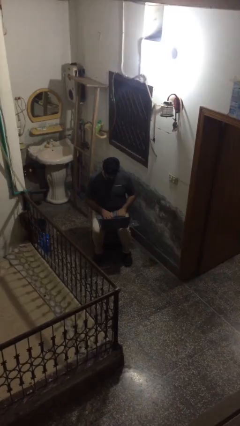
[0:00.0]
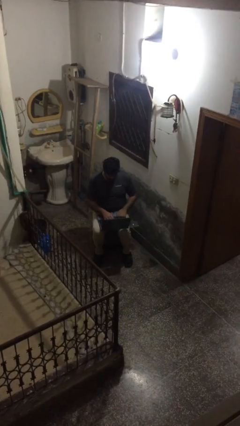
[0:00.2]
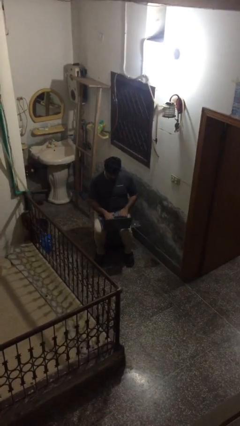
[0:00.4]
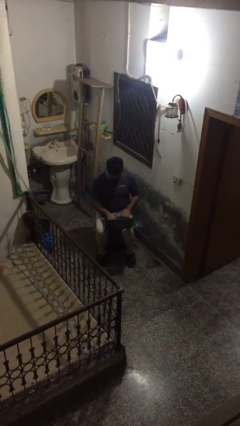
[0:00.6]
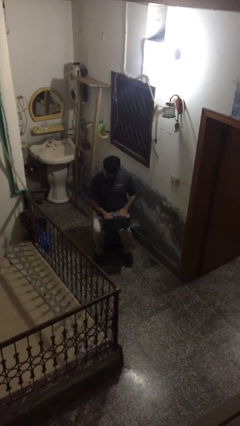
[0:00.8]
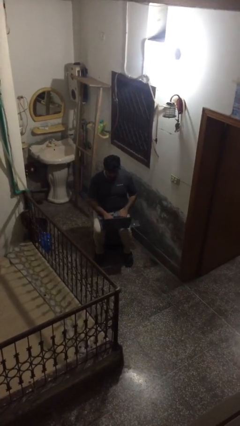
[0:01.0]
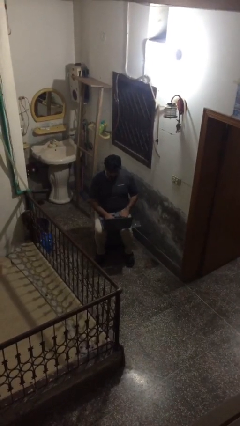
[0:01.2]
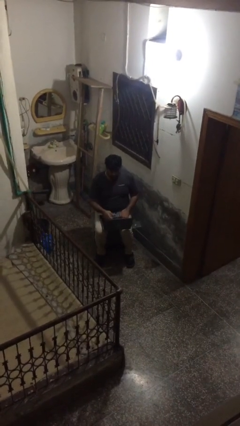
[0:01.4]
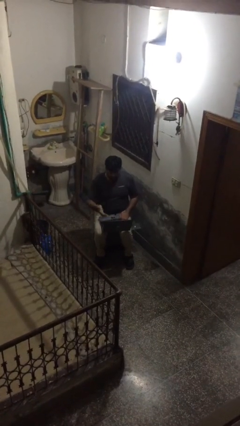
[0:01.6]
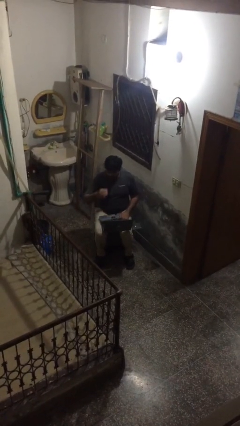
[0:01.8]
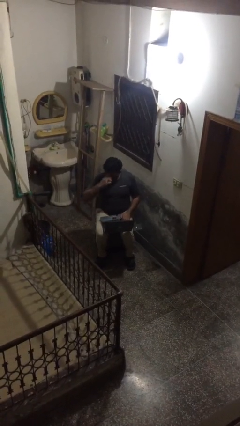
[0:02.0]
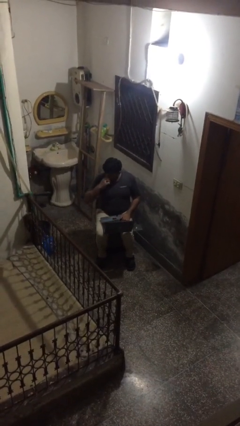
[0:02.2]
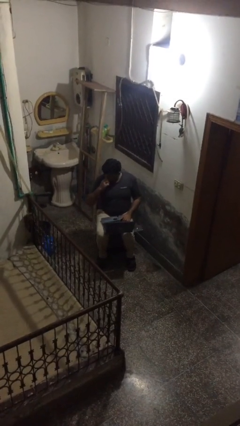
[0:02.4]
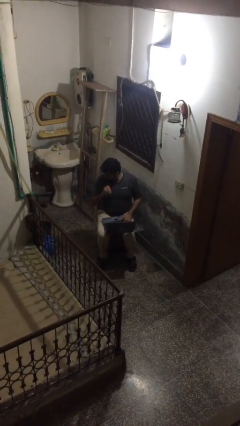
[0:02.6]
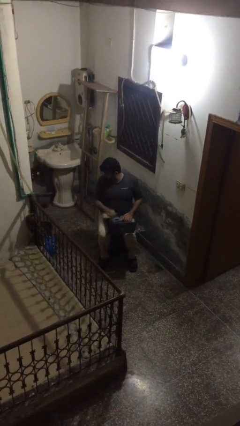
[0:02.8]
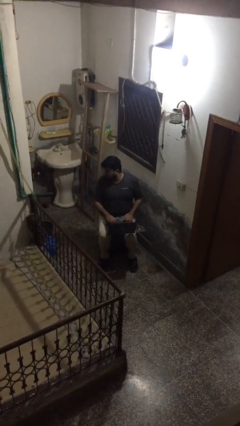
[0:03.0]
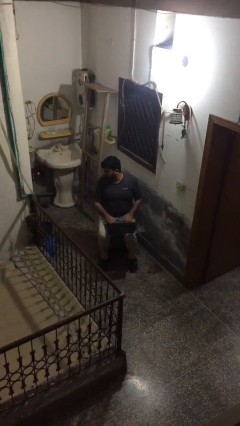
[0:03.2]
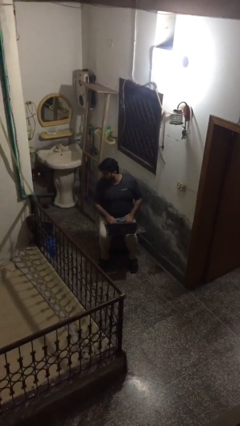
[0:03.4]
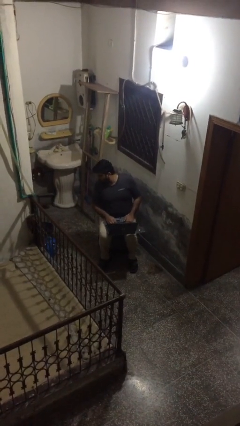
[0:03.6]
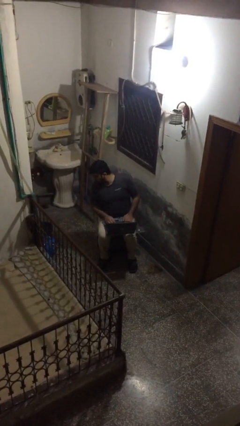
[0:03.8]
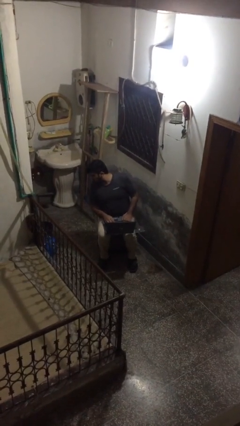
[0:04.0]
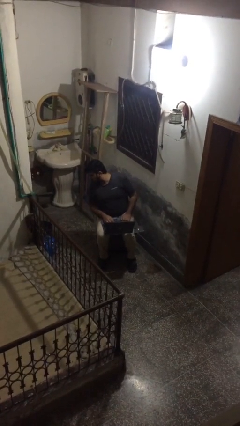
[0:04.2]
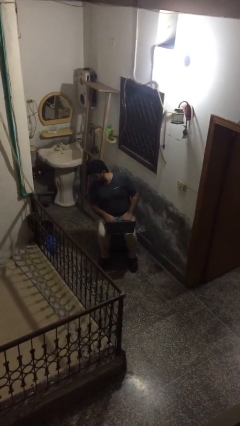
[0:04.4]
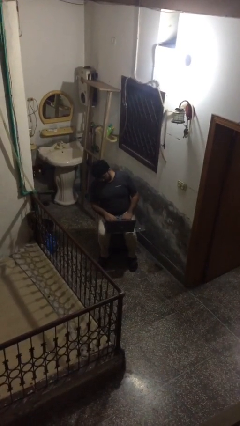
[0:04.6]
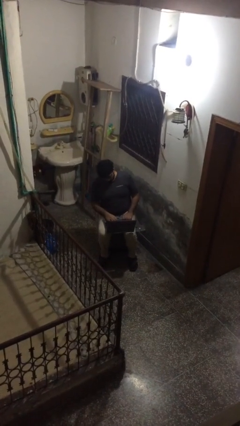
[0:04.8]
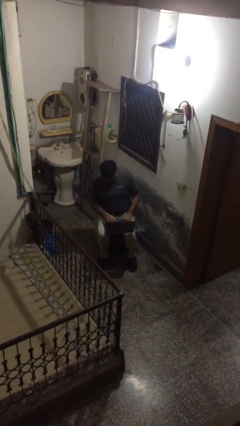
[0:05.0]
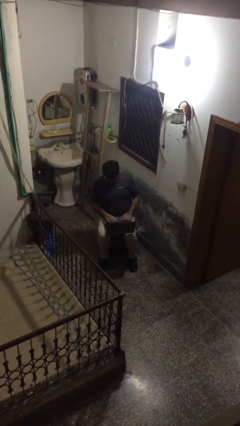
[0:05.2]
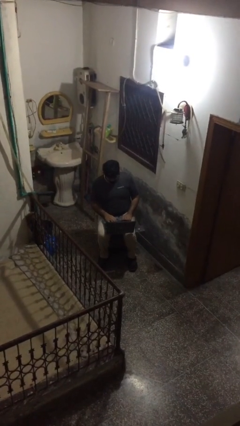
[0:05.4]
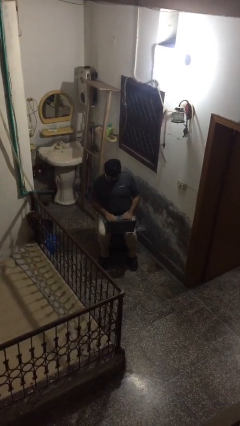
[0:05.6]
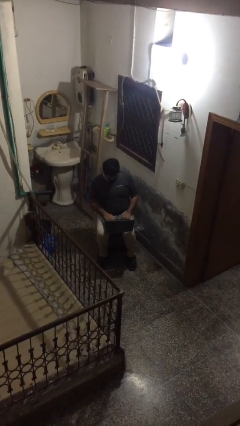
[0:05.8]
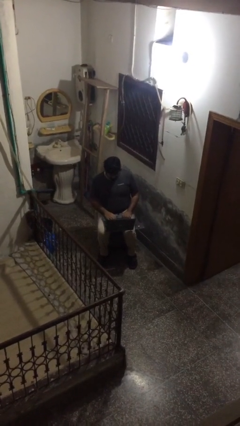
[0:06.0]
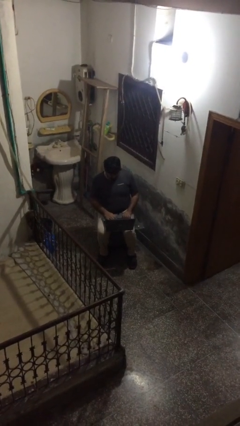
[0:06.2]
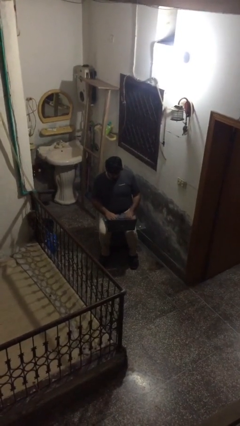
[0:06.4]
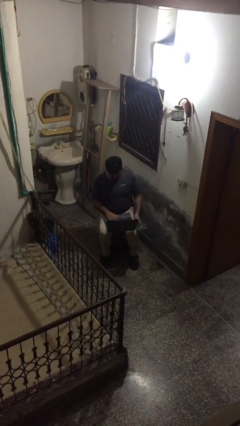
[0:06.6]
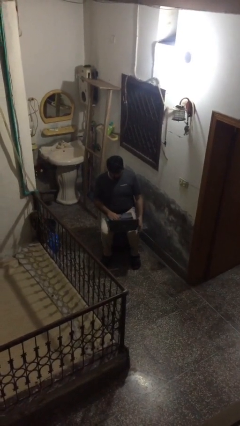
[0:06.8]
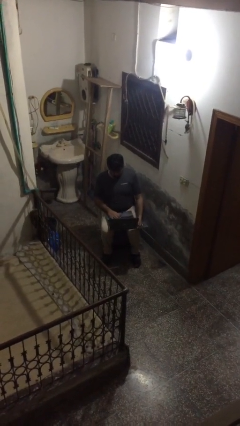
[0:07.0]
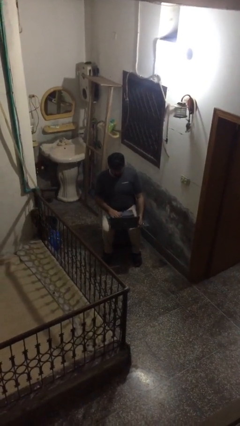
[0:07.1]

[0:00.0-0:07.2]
person interacts with laptop

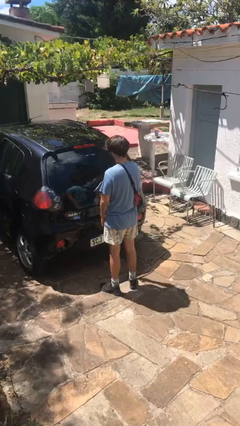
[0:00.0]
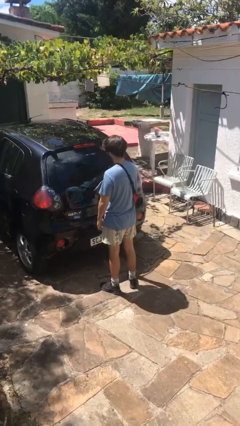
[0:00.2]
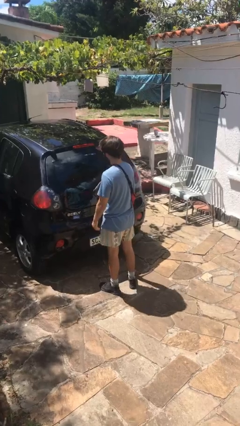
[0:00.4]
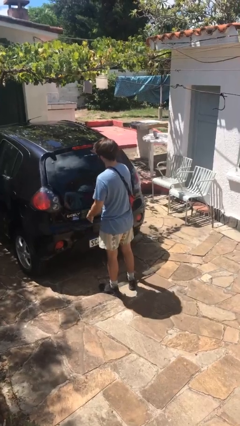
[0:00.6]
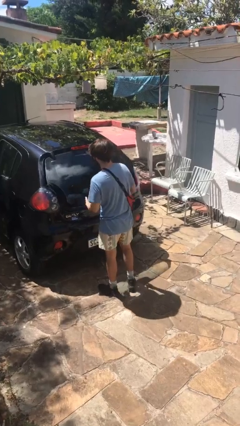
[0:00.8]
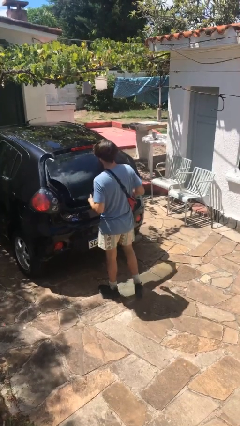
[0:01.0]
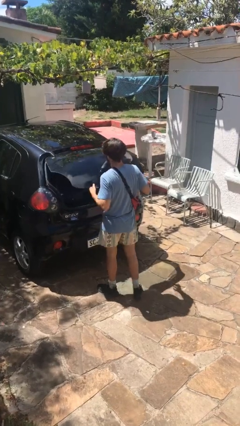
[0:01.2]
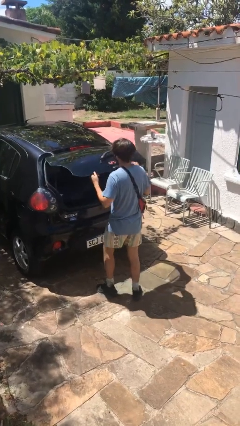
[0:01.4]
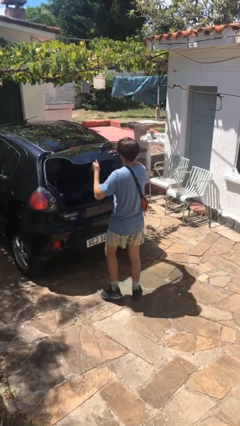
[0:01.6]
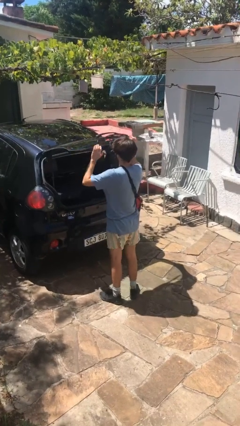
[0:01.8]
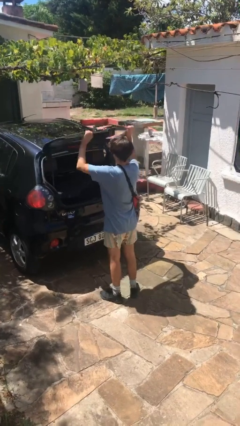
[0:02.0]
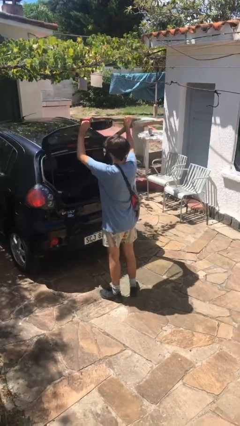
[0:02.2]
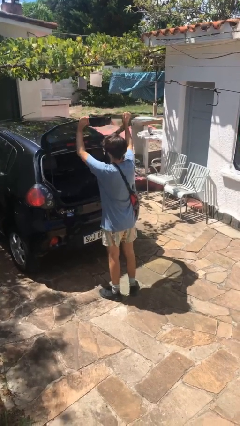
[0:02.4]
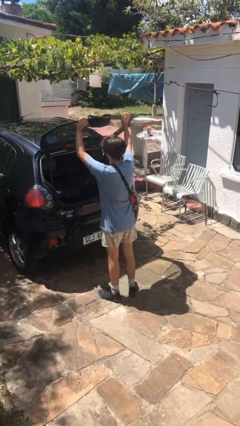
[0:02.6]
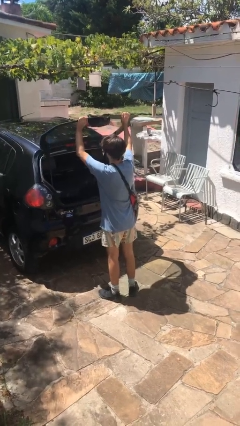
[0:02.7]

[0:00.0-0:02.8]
person opens car trunk

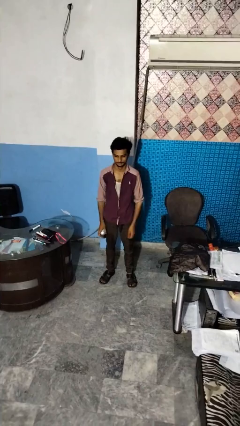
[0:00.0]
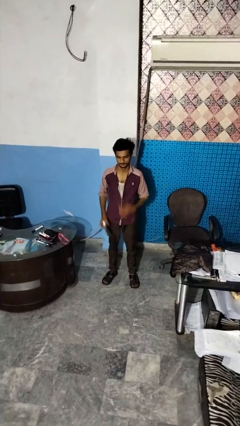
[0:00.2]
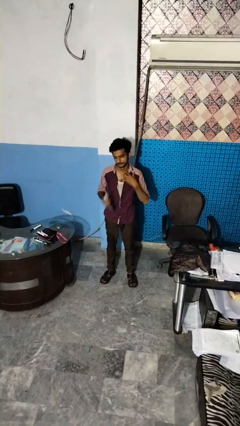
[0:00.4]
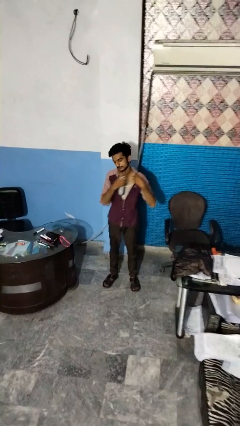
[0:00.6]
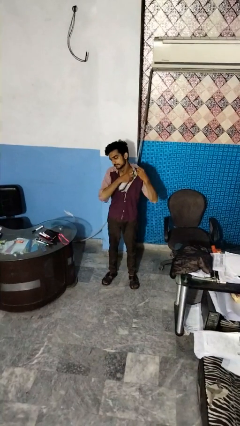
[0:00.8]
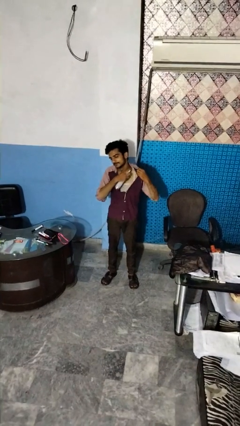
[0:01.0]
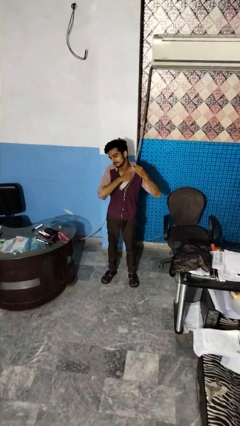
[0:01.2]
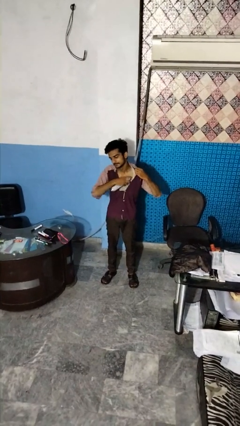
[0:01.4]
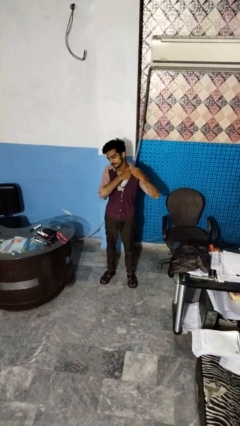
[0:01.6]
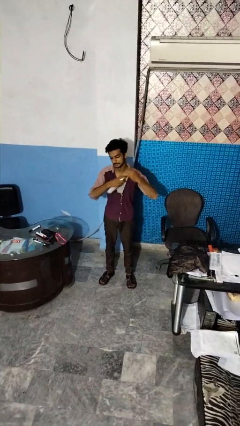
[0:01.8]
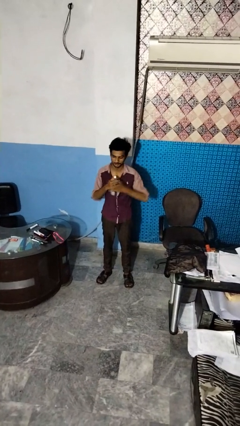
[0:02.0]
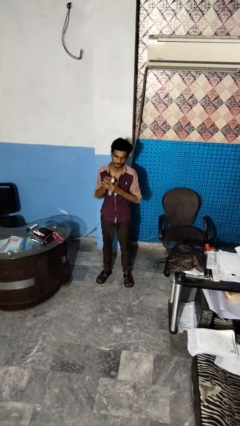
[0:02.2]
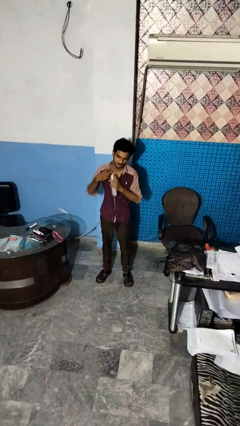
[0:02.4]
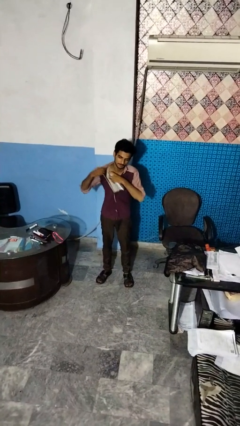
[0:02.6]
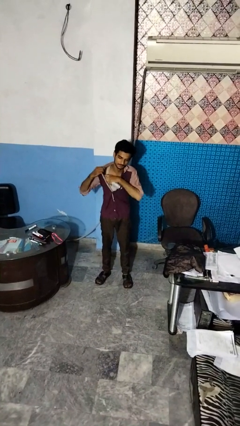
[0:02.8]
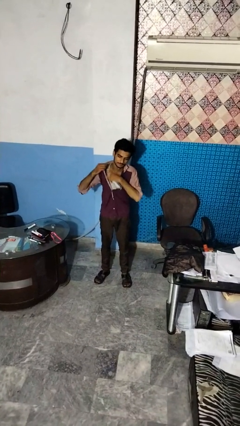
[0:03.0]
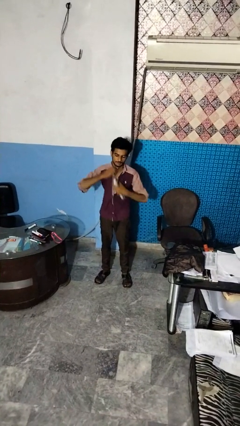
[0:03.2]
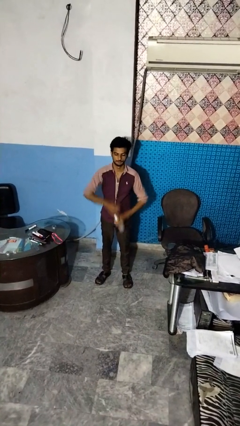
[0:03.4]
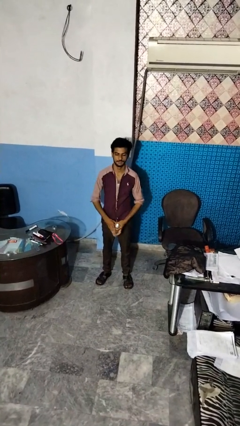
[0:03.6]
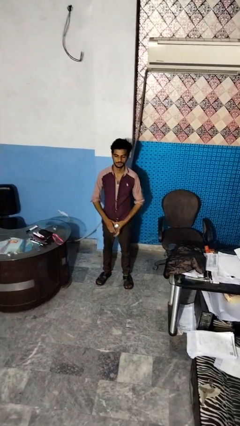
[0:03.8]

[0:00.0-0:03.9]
person applies deodorant

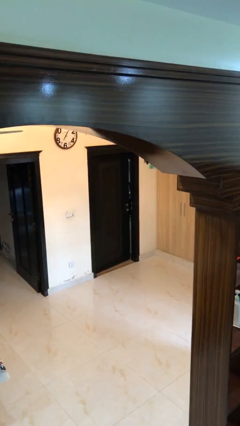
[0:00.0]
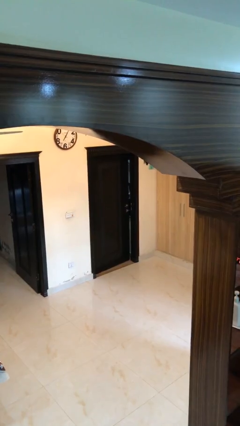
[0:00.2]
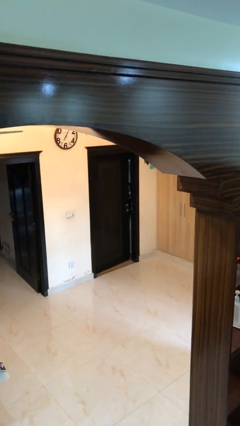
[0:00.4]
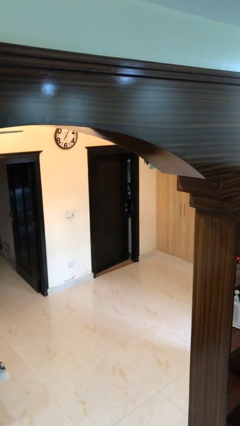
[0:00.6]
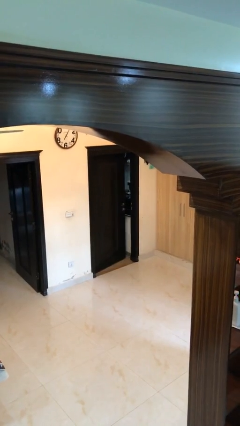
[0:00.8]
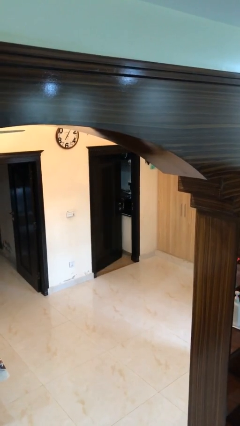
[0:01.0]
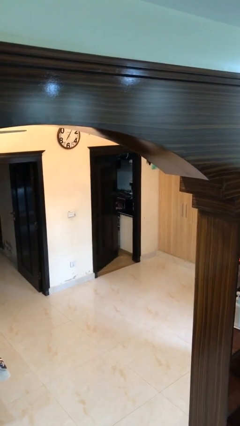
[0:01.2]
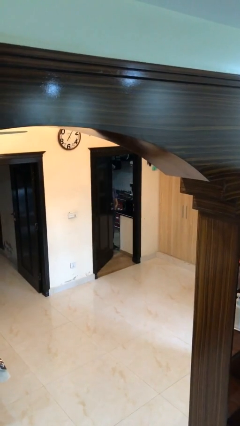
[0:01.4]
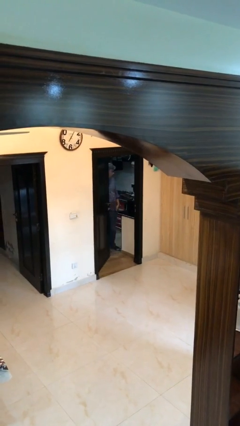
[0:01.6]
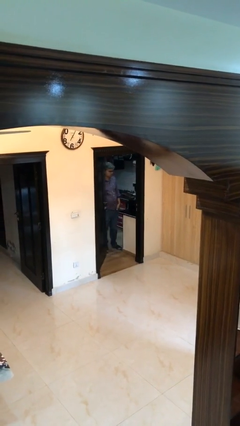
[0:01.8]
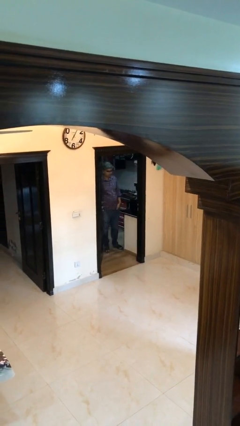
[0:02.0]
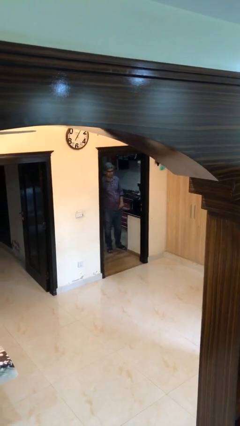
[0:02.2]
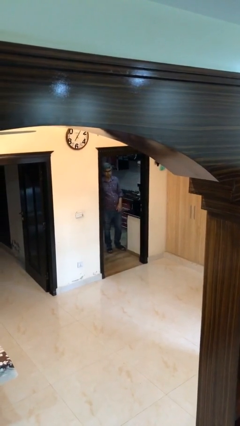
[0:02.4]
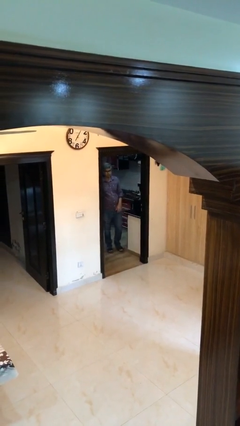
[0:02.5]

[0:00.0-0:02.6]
person opens facility door

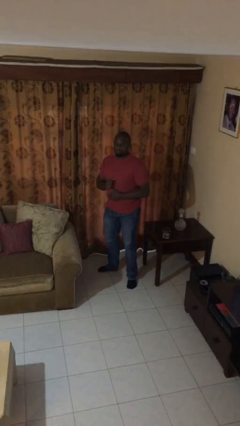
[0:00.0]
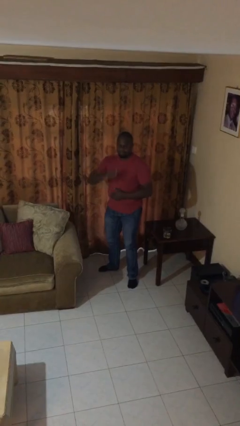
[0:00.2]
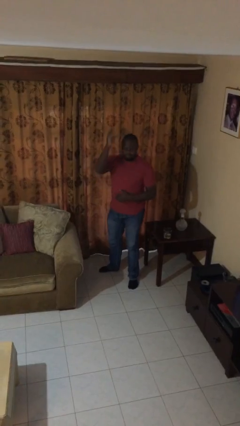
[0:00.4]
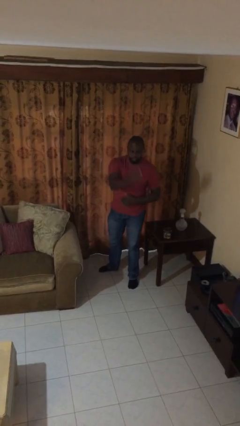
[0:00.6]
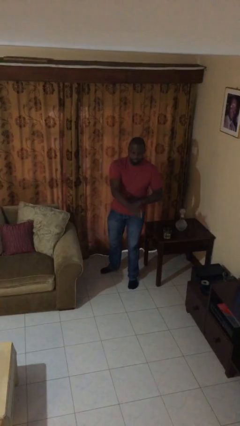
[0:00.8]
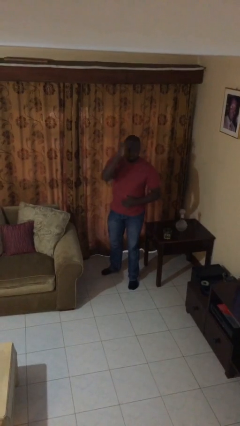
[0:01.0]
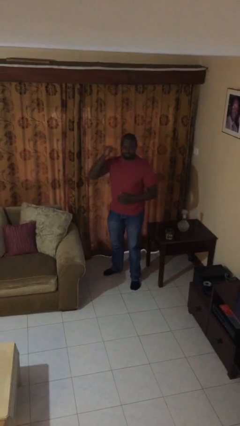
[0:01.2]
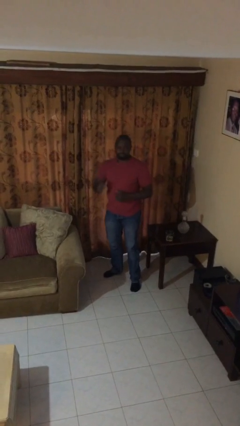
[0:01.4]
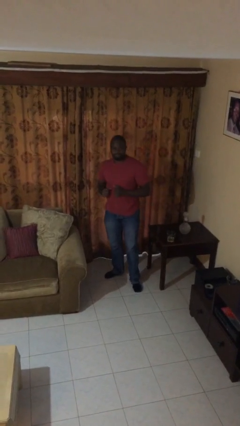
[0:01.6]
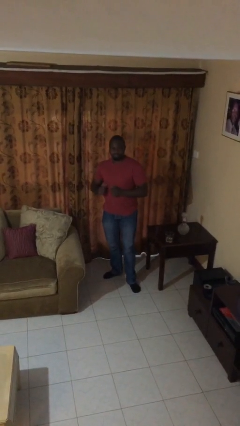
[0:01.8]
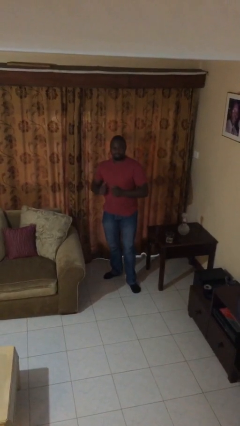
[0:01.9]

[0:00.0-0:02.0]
person karate chop
